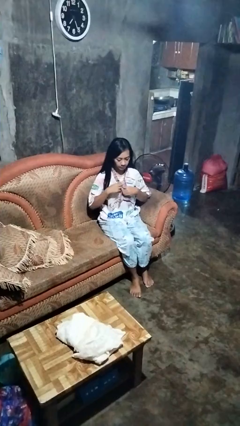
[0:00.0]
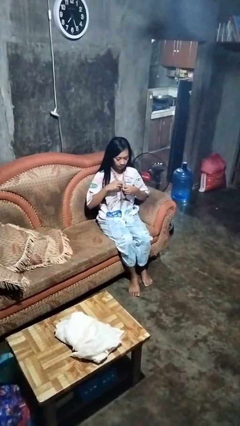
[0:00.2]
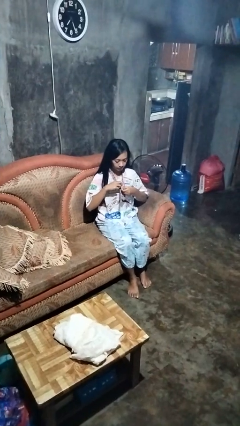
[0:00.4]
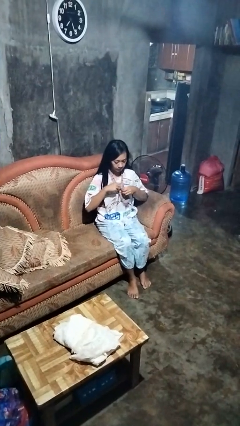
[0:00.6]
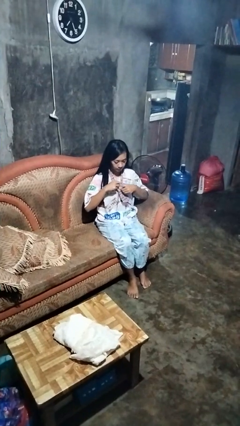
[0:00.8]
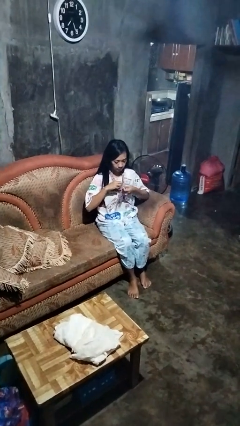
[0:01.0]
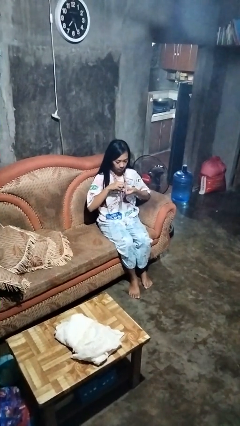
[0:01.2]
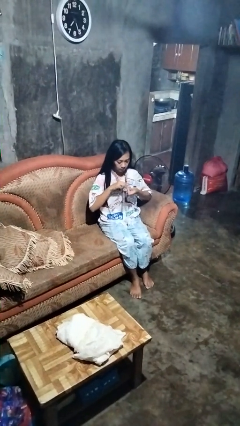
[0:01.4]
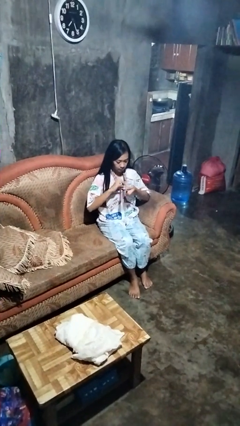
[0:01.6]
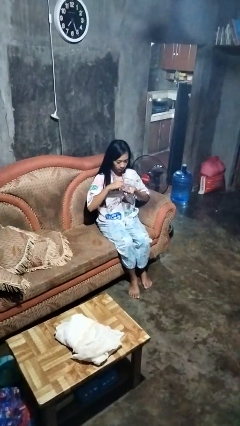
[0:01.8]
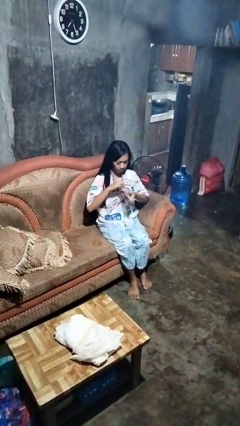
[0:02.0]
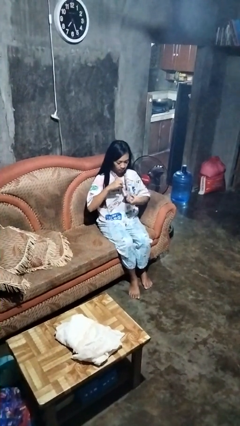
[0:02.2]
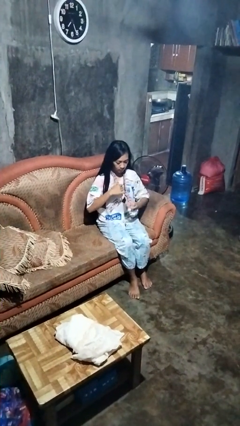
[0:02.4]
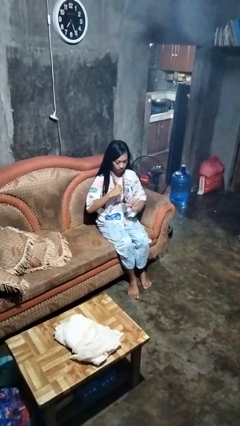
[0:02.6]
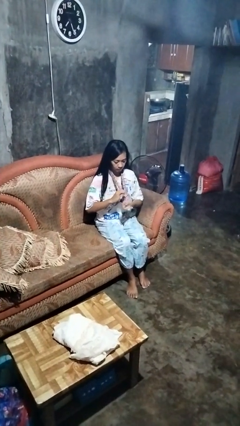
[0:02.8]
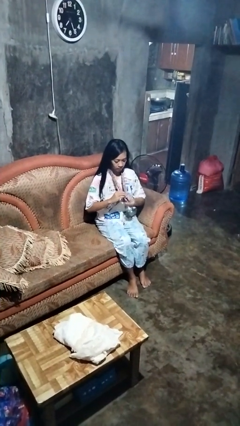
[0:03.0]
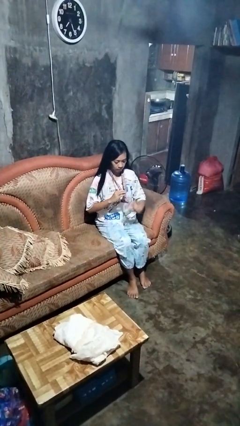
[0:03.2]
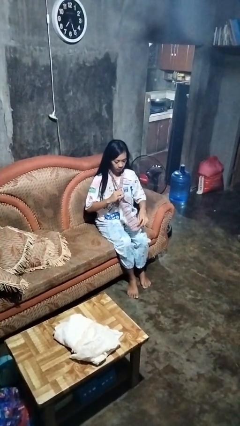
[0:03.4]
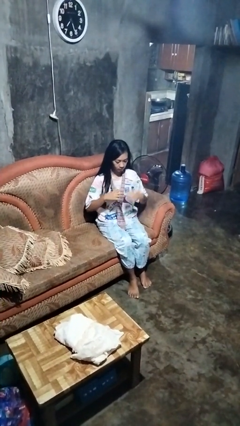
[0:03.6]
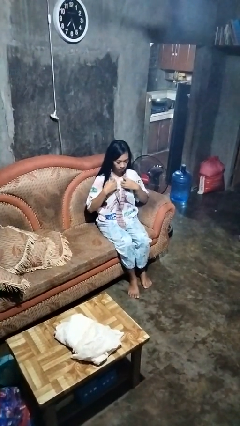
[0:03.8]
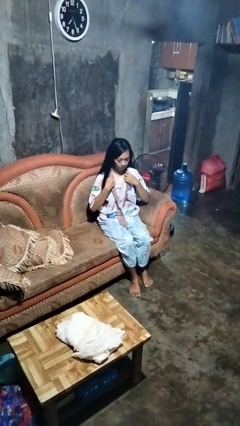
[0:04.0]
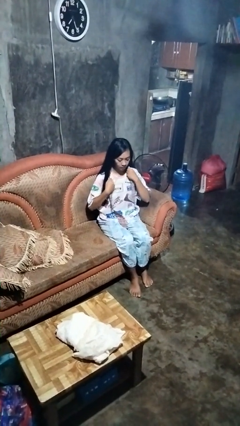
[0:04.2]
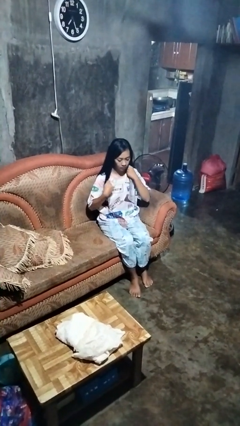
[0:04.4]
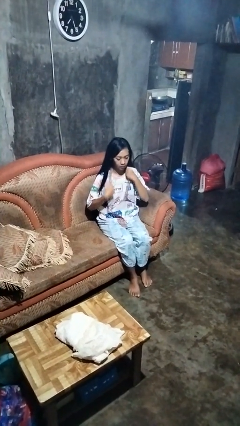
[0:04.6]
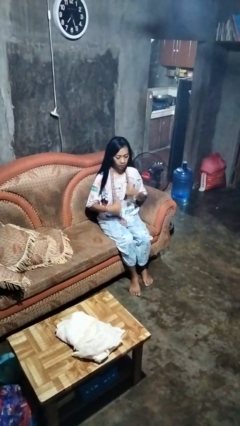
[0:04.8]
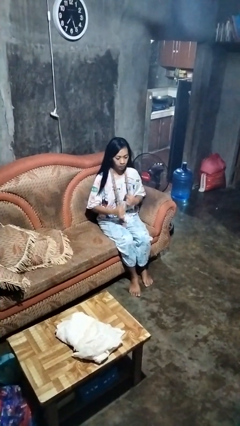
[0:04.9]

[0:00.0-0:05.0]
person takes off necktie

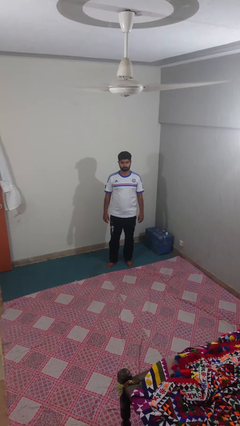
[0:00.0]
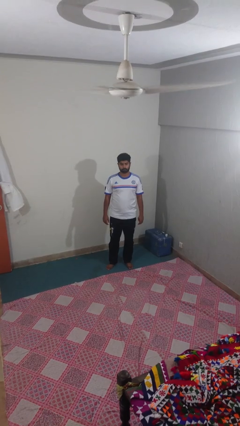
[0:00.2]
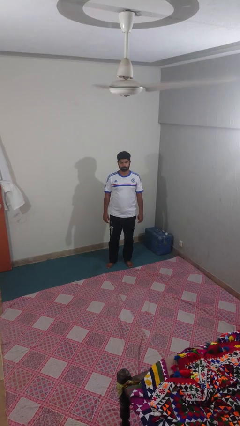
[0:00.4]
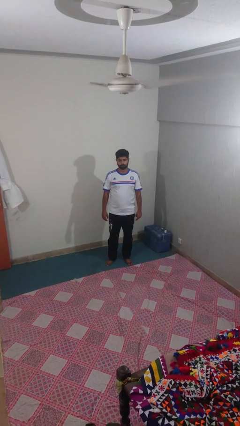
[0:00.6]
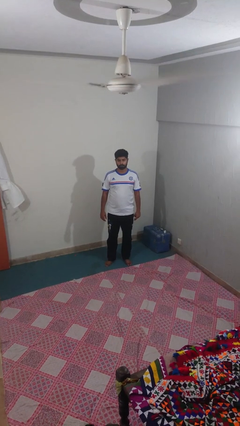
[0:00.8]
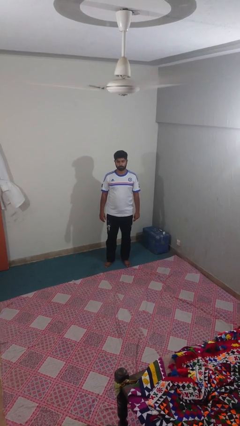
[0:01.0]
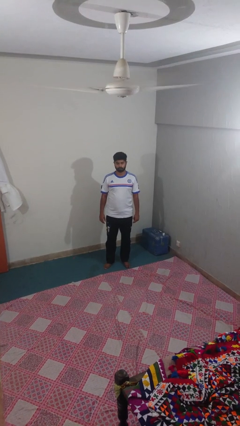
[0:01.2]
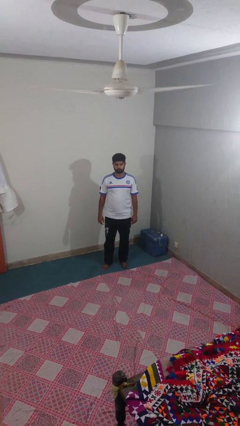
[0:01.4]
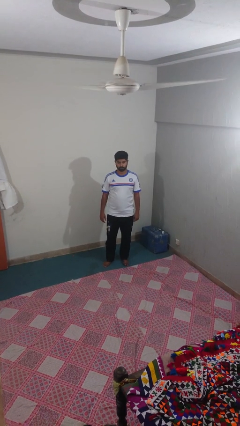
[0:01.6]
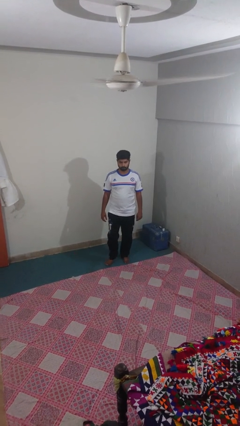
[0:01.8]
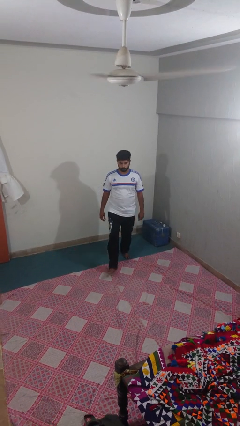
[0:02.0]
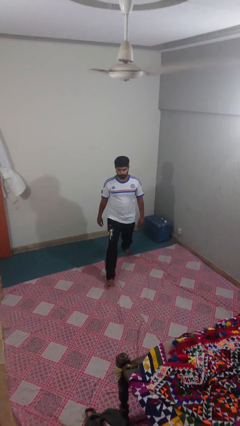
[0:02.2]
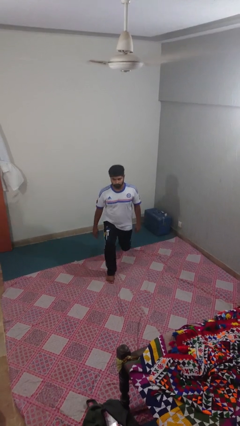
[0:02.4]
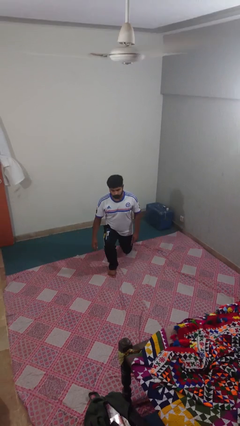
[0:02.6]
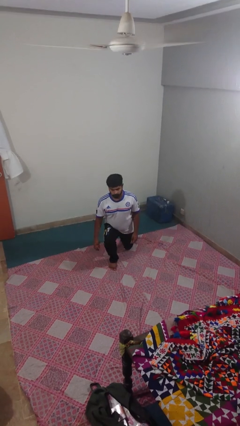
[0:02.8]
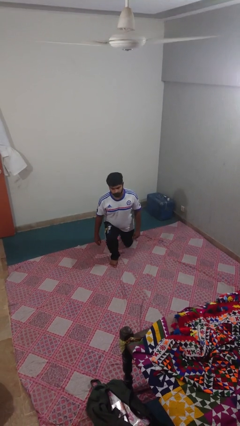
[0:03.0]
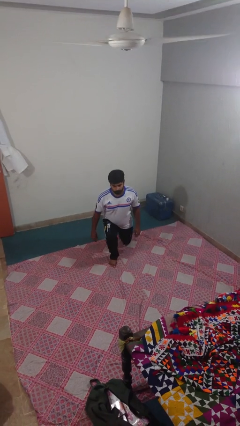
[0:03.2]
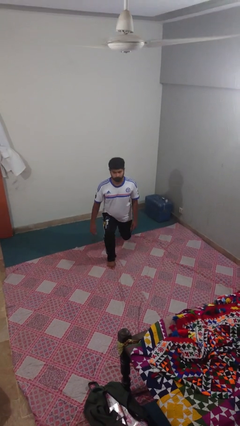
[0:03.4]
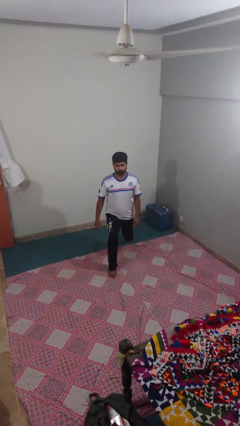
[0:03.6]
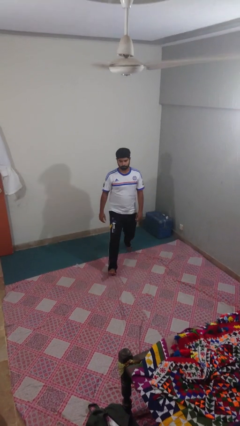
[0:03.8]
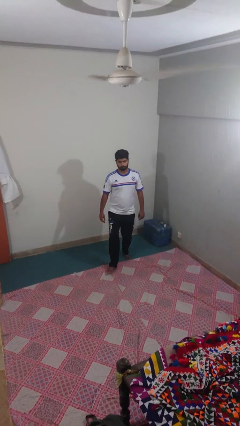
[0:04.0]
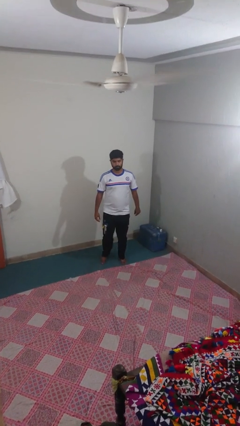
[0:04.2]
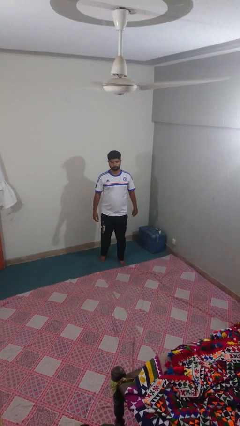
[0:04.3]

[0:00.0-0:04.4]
person exercises with lunges

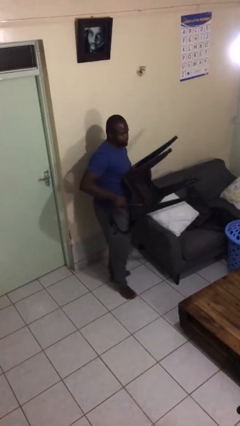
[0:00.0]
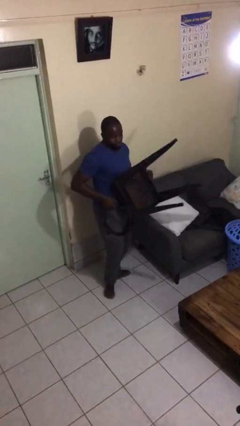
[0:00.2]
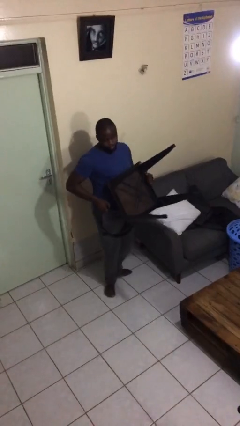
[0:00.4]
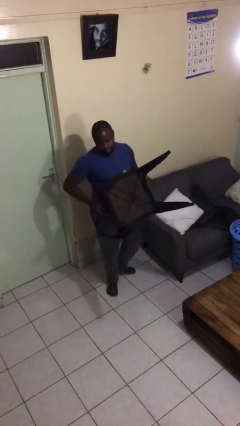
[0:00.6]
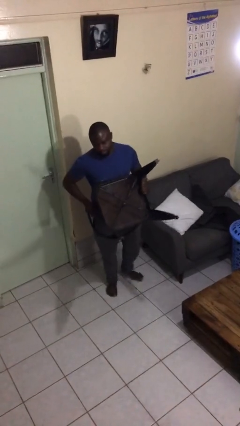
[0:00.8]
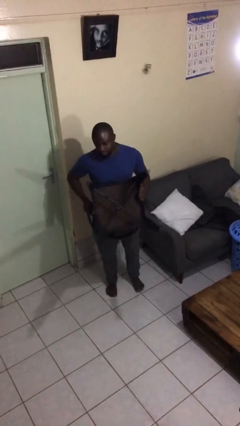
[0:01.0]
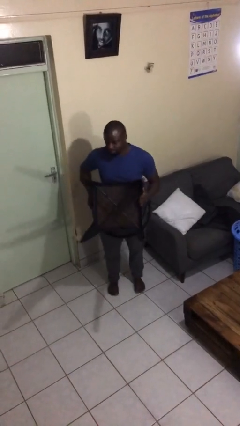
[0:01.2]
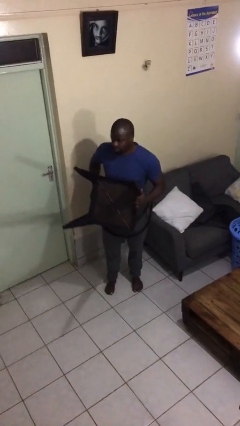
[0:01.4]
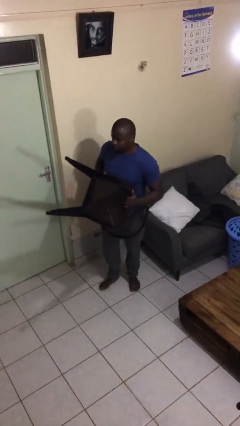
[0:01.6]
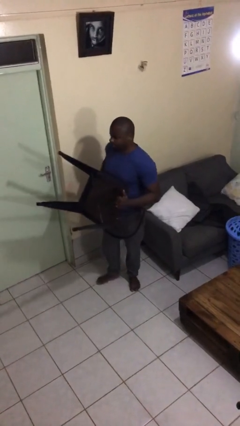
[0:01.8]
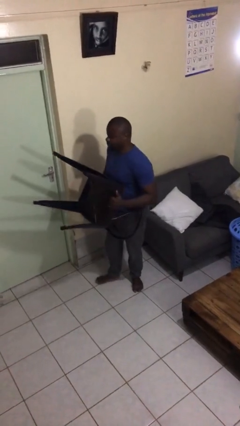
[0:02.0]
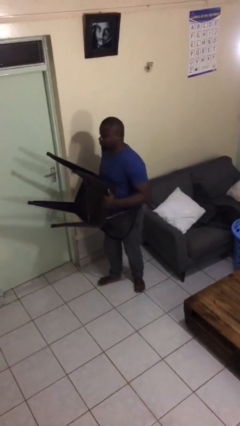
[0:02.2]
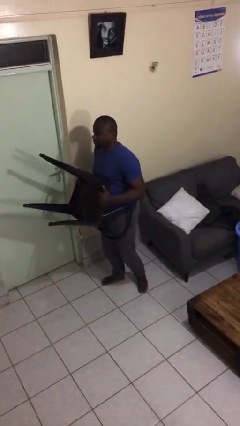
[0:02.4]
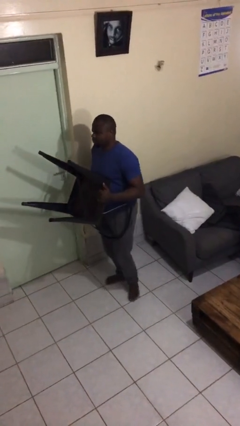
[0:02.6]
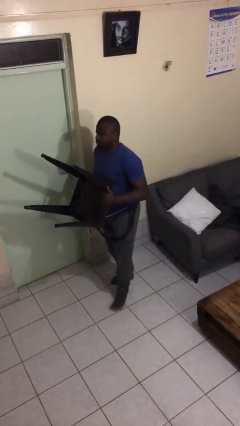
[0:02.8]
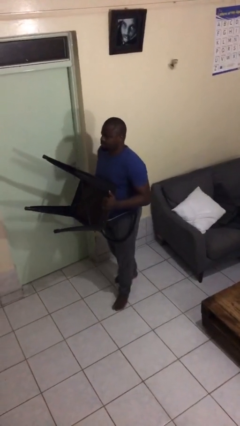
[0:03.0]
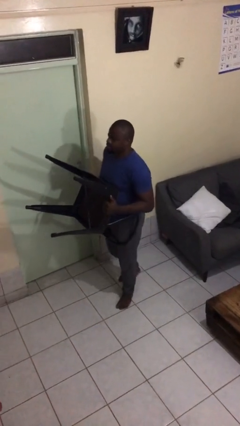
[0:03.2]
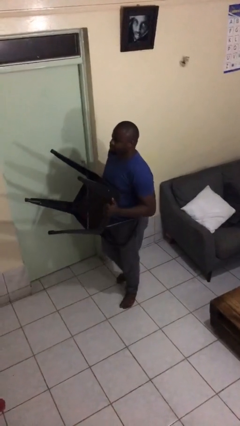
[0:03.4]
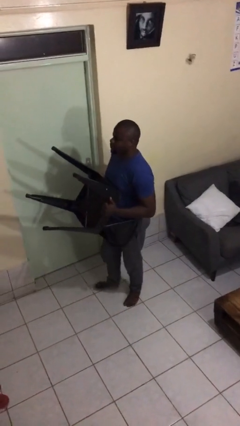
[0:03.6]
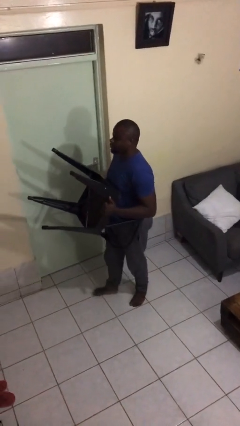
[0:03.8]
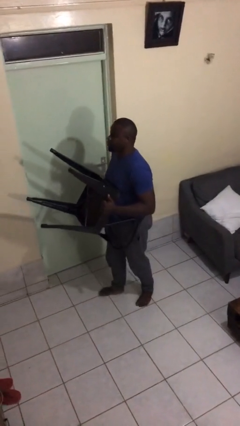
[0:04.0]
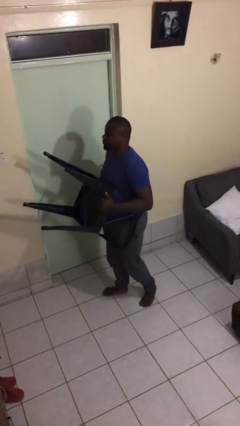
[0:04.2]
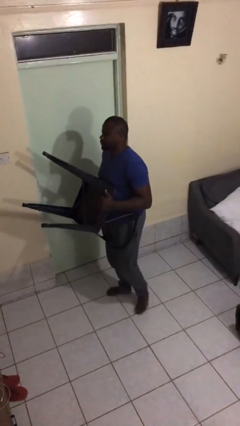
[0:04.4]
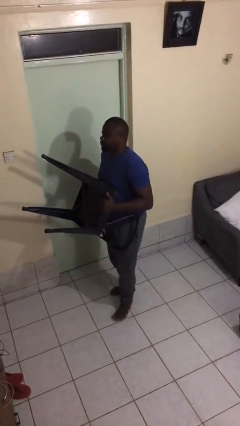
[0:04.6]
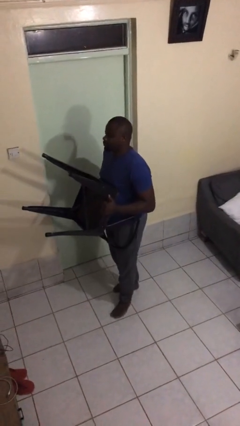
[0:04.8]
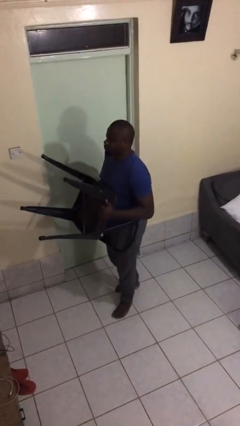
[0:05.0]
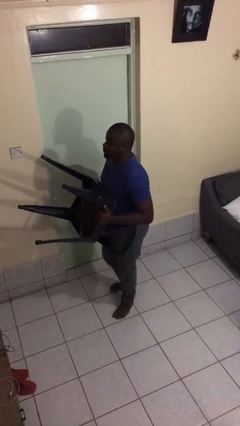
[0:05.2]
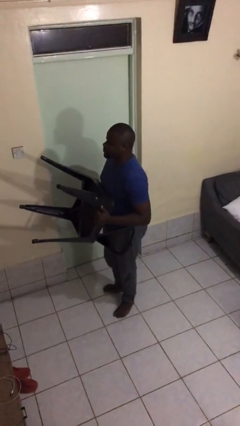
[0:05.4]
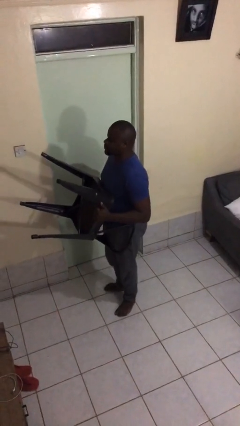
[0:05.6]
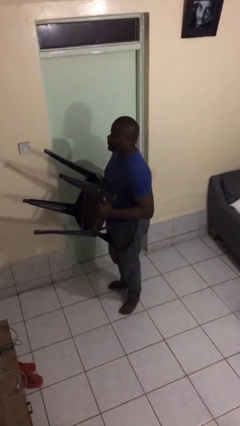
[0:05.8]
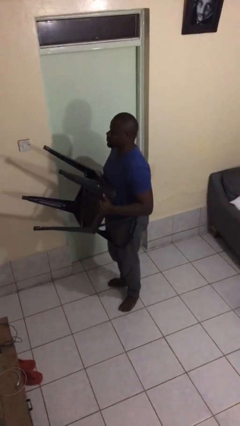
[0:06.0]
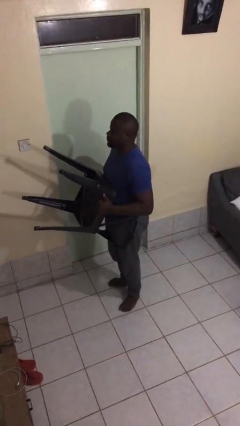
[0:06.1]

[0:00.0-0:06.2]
person carries furniture

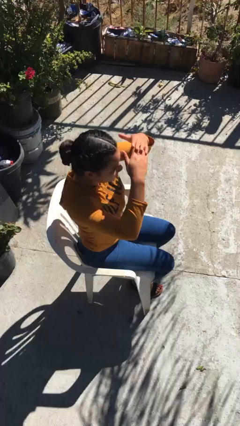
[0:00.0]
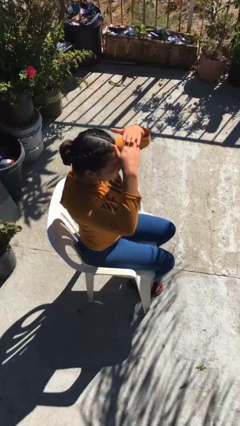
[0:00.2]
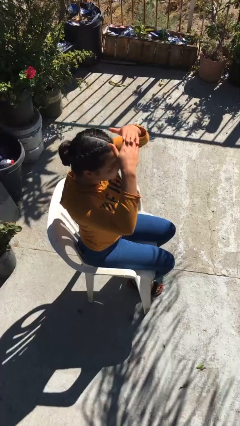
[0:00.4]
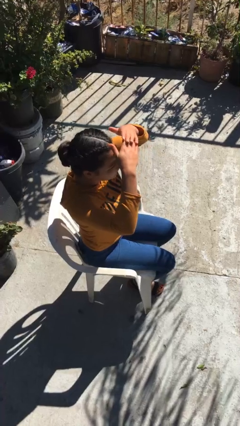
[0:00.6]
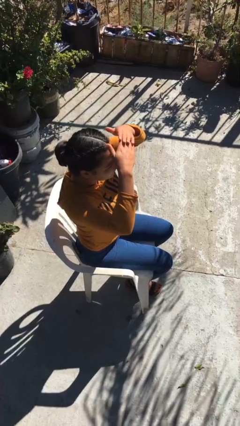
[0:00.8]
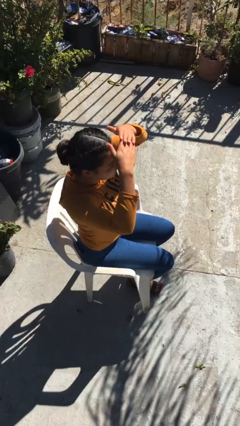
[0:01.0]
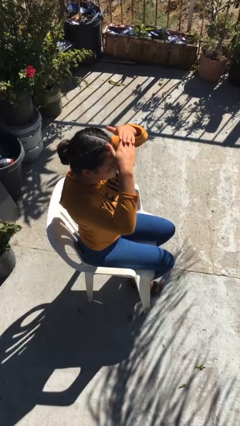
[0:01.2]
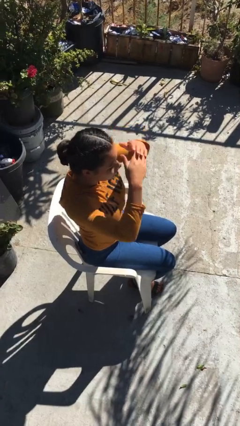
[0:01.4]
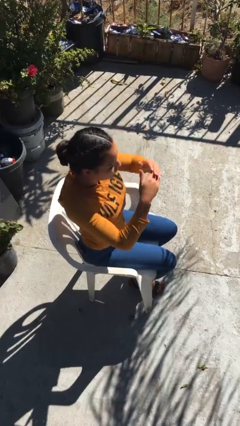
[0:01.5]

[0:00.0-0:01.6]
person shades eyes

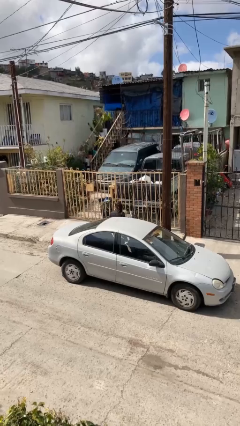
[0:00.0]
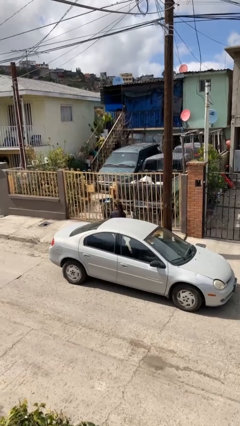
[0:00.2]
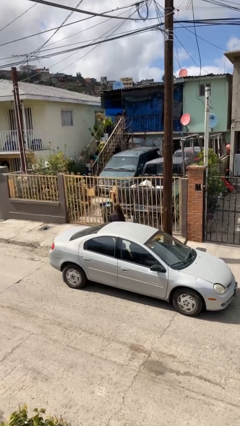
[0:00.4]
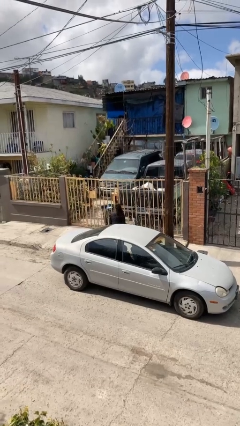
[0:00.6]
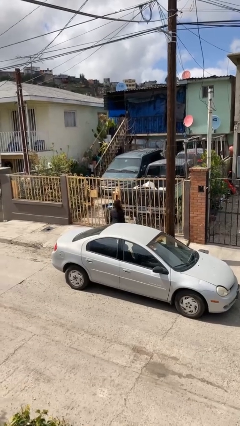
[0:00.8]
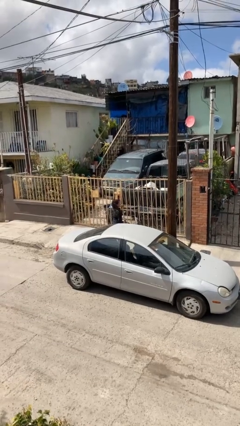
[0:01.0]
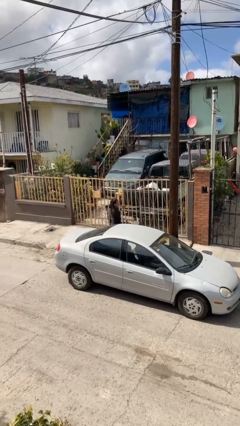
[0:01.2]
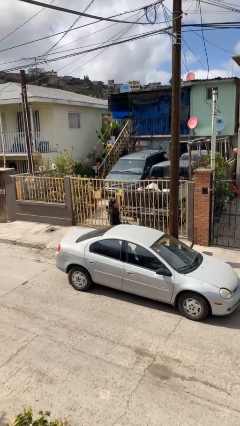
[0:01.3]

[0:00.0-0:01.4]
person exits car
